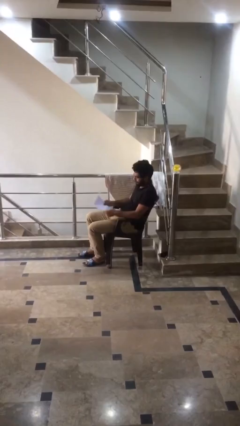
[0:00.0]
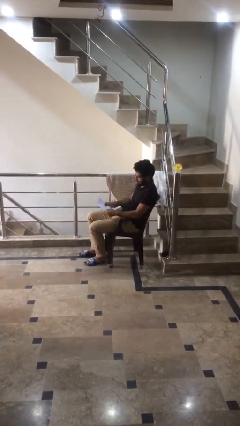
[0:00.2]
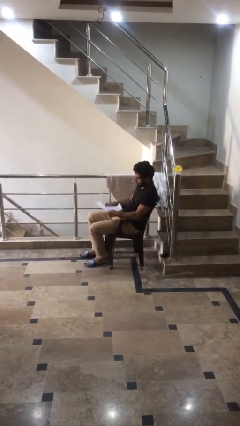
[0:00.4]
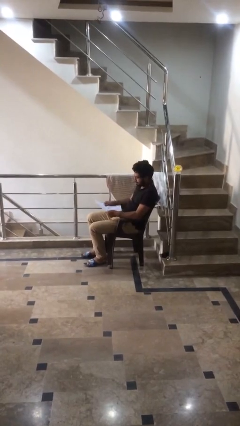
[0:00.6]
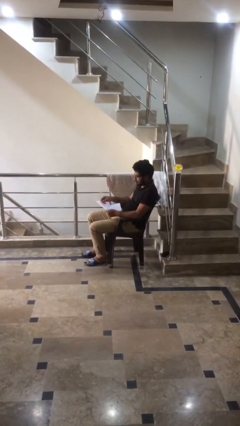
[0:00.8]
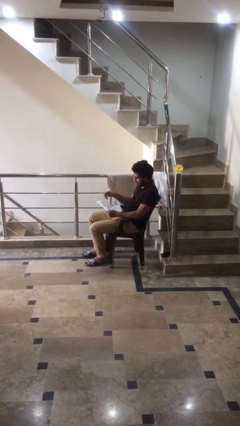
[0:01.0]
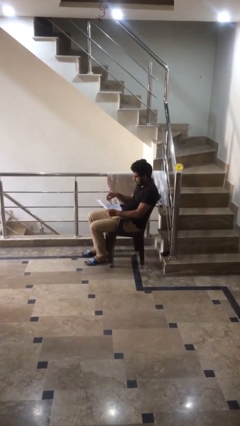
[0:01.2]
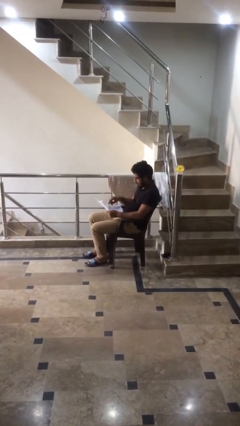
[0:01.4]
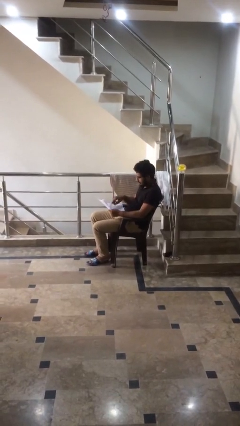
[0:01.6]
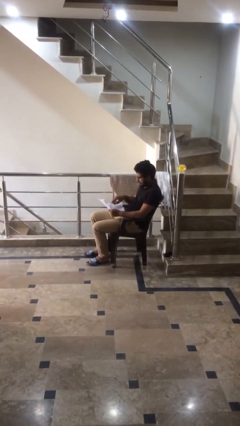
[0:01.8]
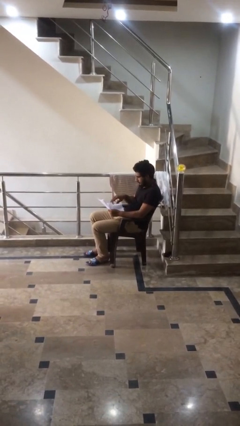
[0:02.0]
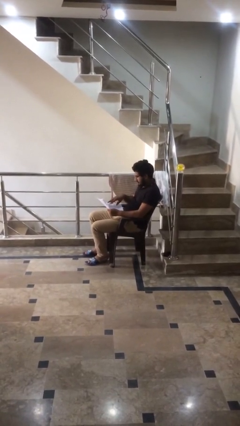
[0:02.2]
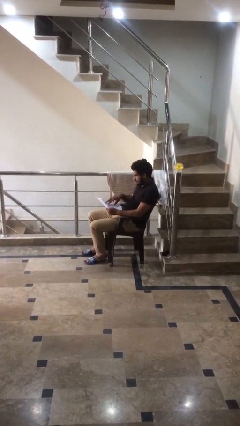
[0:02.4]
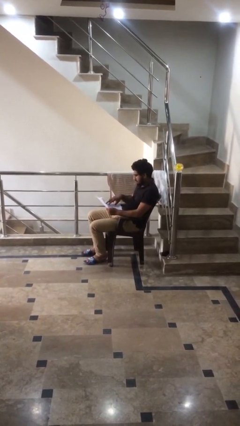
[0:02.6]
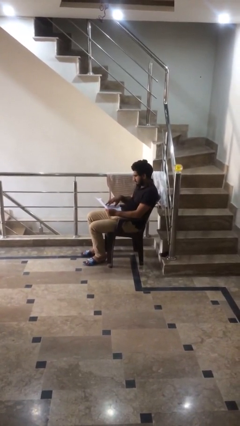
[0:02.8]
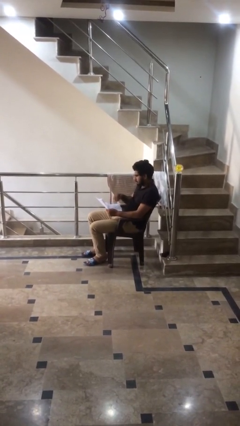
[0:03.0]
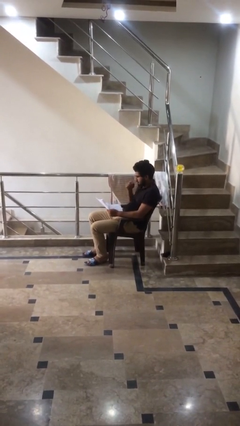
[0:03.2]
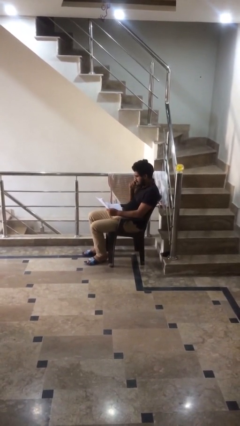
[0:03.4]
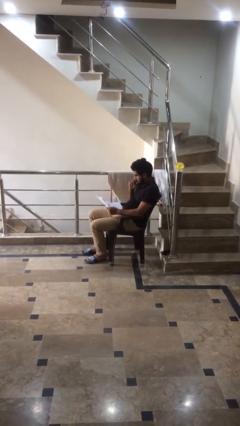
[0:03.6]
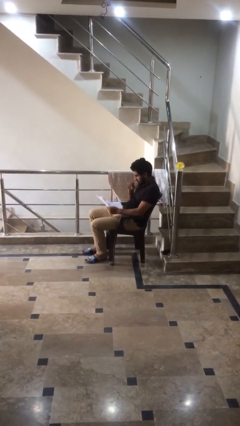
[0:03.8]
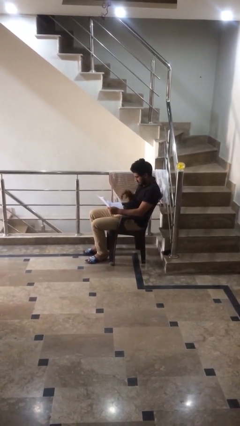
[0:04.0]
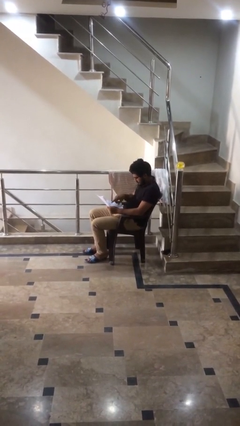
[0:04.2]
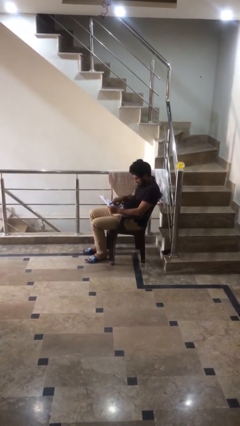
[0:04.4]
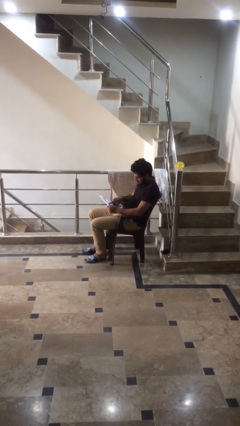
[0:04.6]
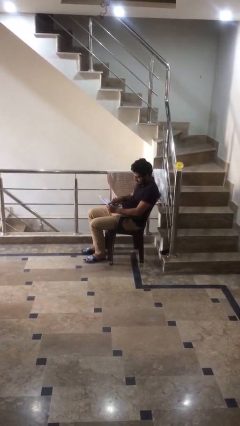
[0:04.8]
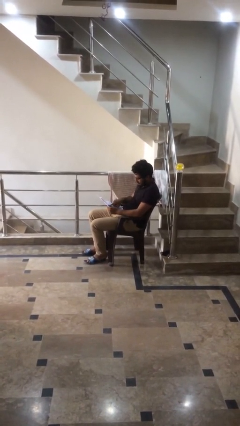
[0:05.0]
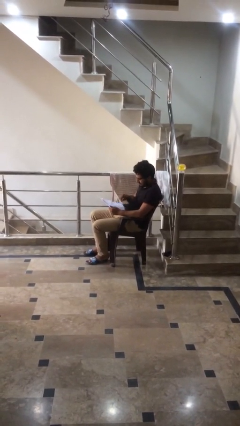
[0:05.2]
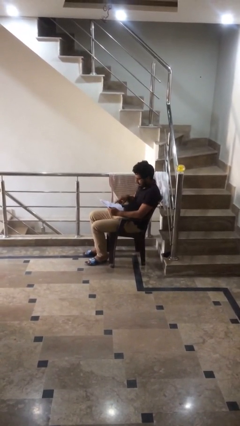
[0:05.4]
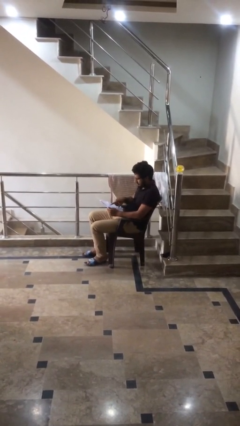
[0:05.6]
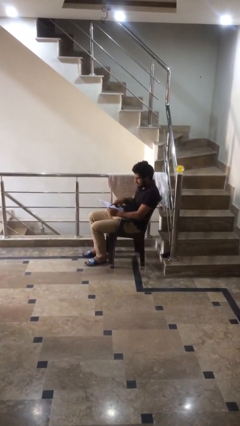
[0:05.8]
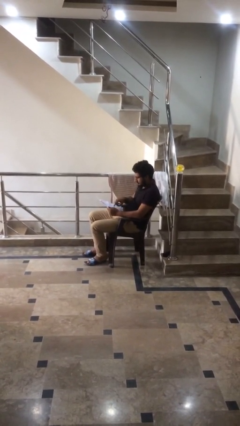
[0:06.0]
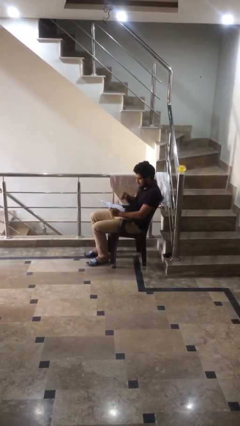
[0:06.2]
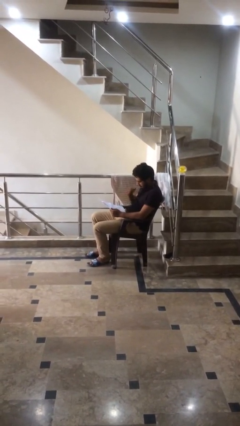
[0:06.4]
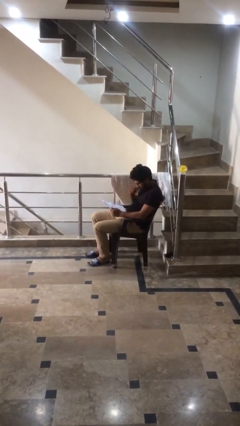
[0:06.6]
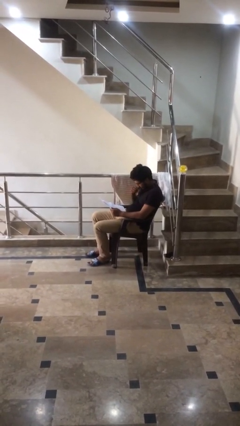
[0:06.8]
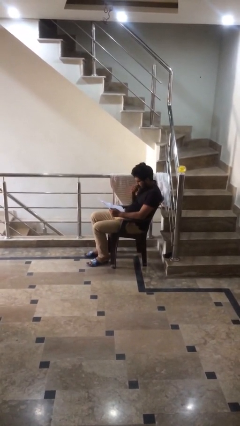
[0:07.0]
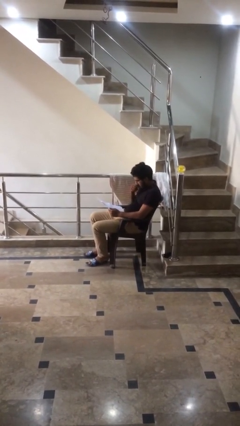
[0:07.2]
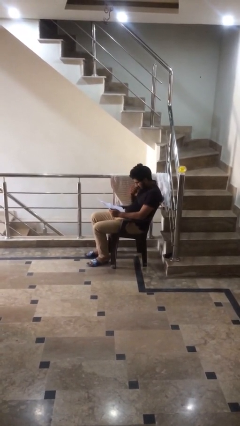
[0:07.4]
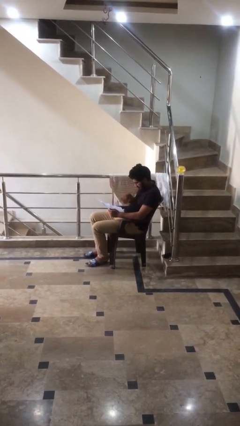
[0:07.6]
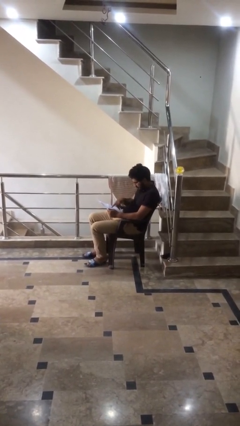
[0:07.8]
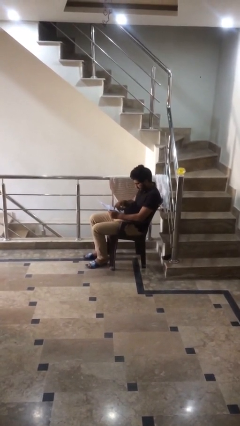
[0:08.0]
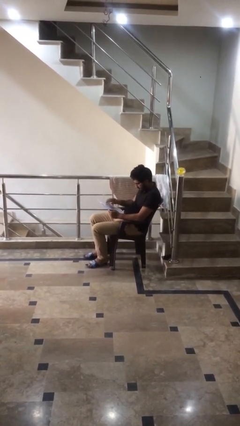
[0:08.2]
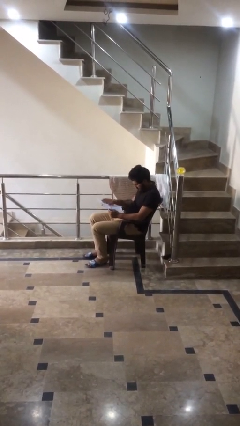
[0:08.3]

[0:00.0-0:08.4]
person reads document

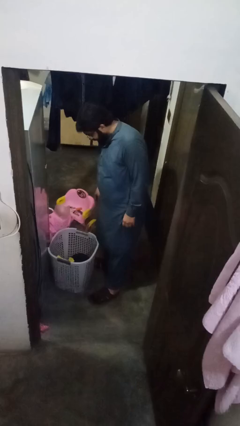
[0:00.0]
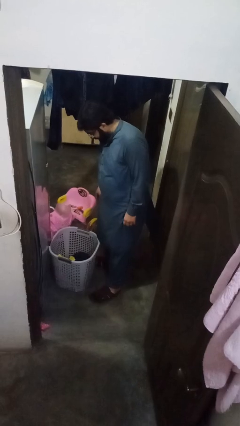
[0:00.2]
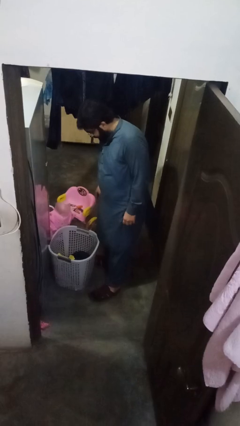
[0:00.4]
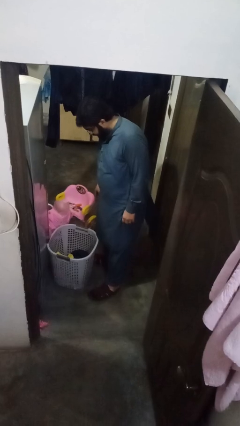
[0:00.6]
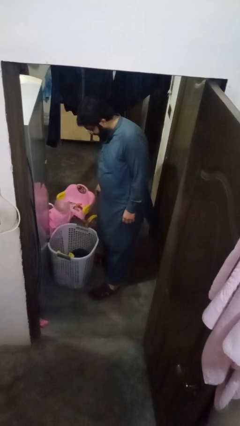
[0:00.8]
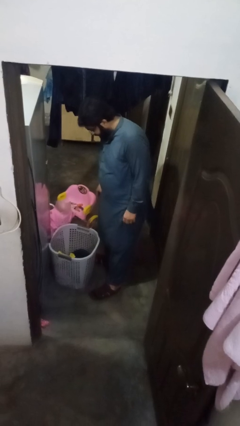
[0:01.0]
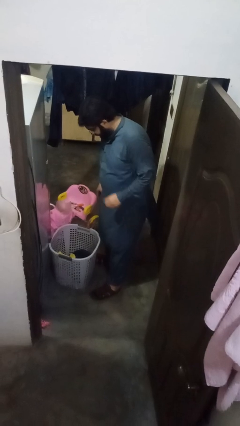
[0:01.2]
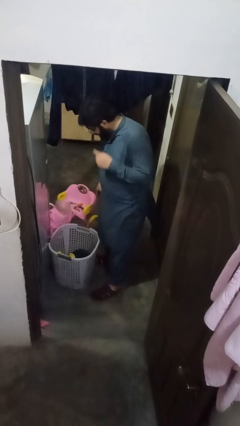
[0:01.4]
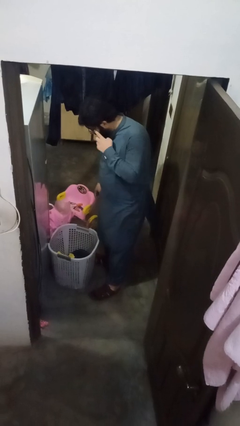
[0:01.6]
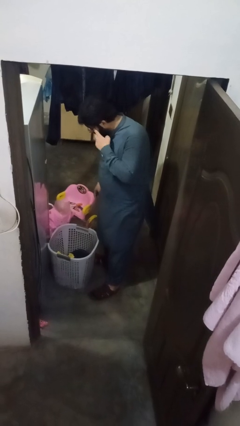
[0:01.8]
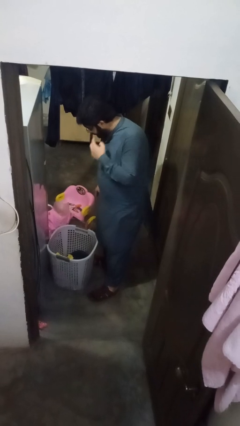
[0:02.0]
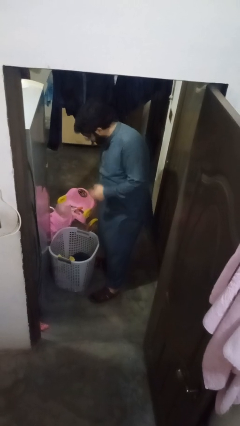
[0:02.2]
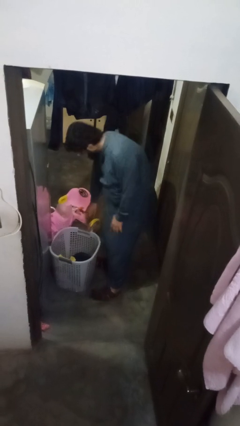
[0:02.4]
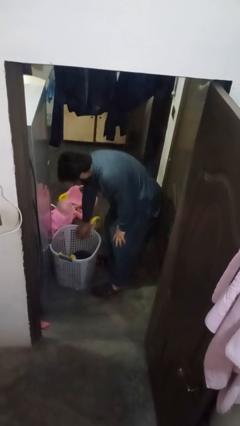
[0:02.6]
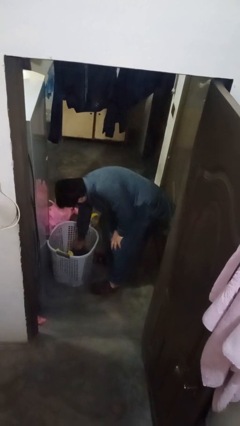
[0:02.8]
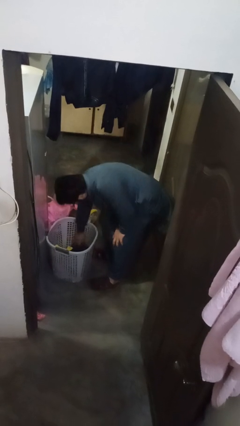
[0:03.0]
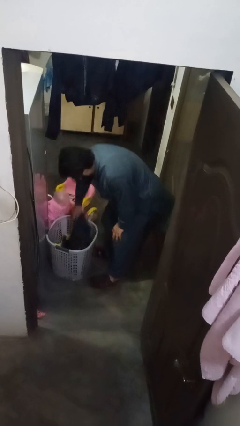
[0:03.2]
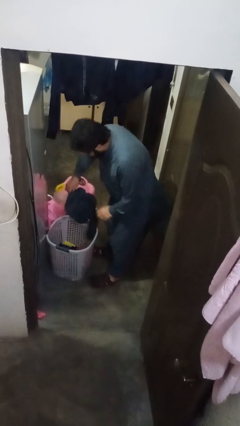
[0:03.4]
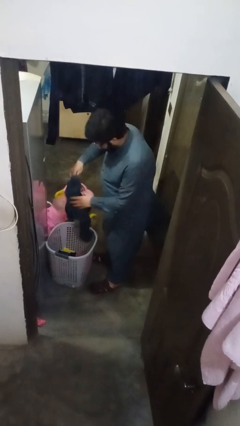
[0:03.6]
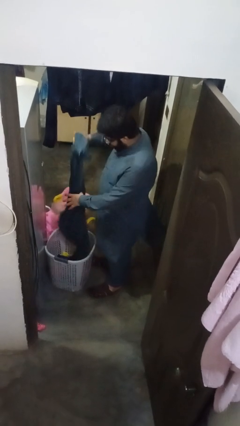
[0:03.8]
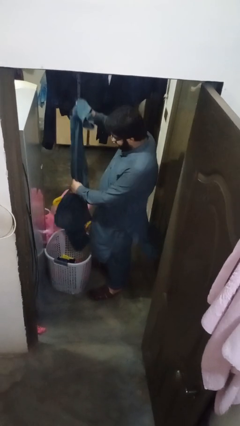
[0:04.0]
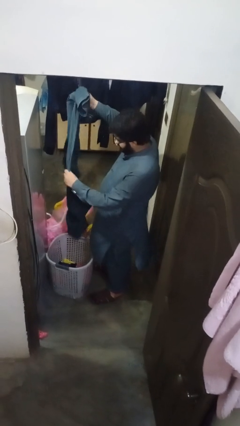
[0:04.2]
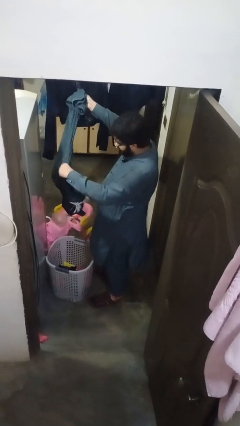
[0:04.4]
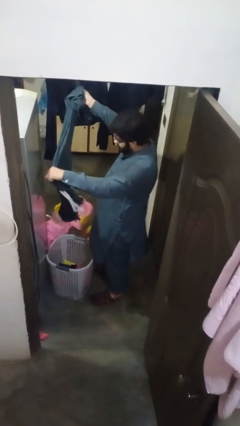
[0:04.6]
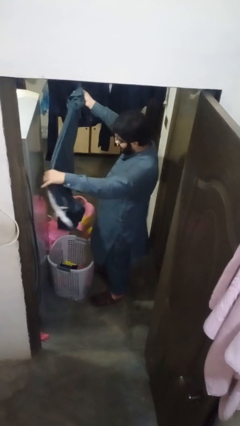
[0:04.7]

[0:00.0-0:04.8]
person folds pants

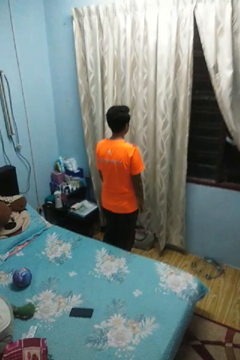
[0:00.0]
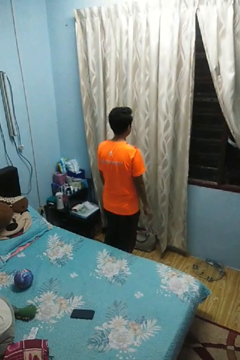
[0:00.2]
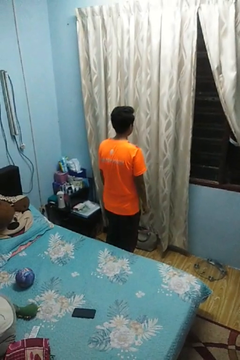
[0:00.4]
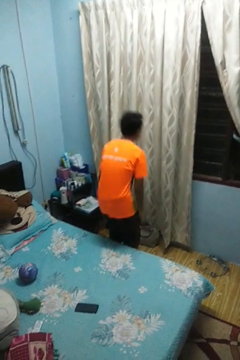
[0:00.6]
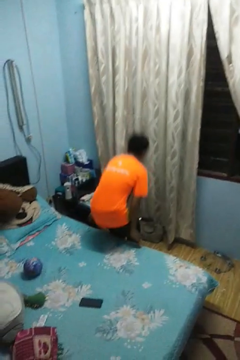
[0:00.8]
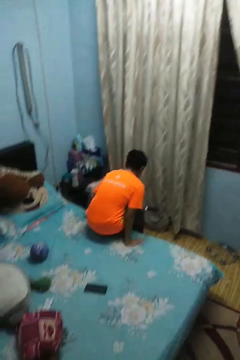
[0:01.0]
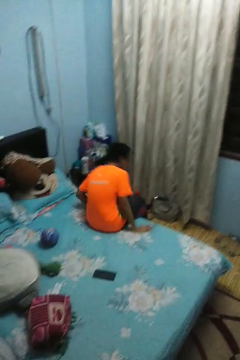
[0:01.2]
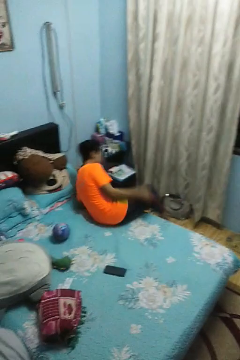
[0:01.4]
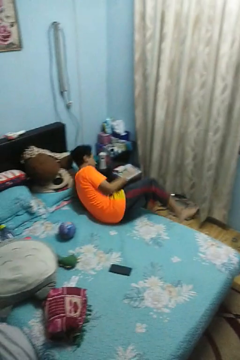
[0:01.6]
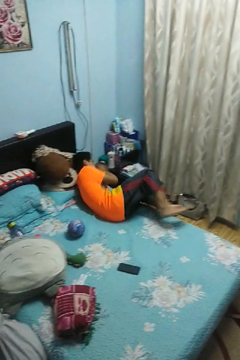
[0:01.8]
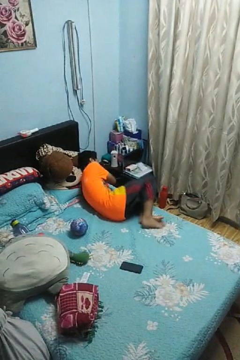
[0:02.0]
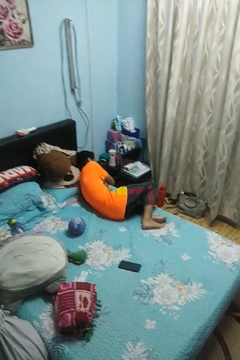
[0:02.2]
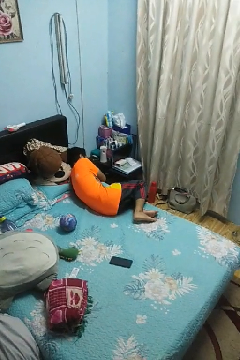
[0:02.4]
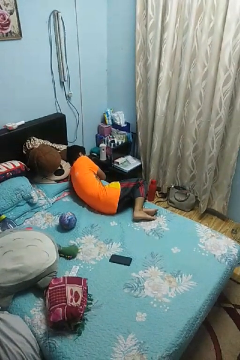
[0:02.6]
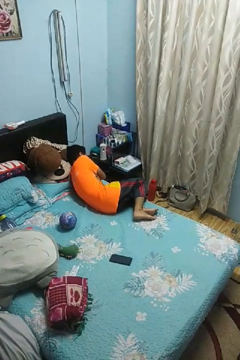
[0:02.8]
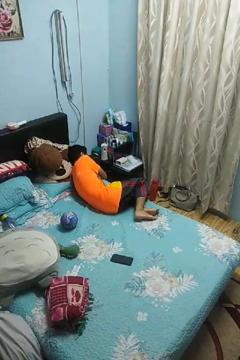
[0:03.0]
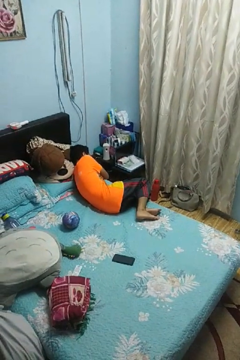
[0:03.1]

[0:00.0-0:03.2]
person lies down on bed

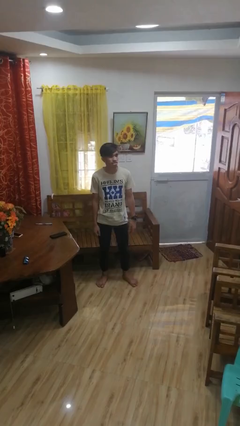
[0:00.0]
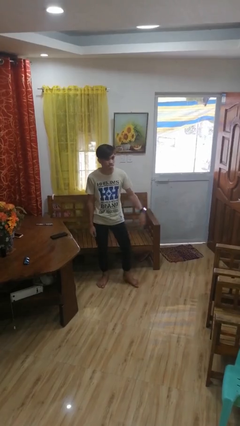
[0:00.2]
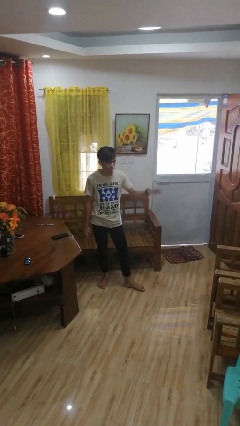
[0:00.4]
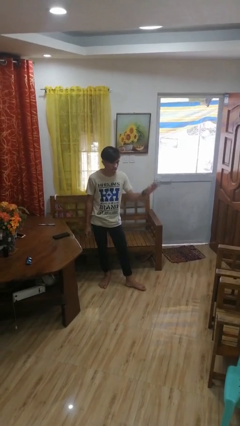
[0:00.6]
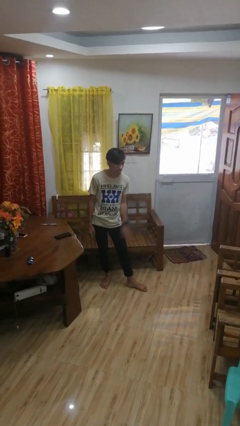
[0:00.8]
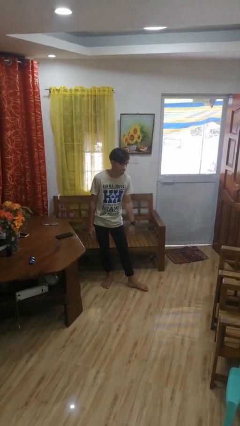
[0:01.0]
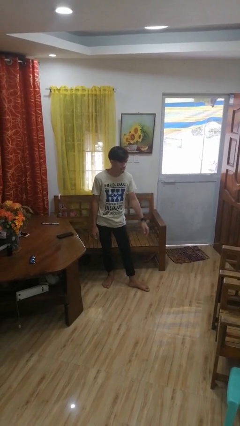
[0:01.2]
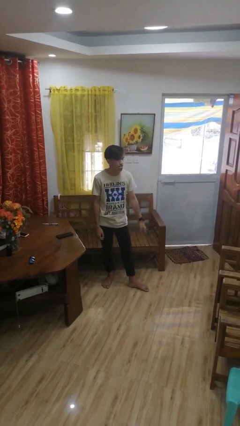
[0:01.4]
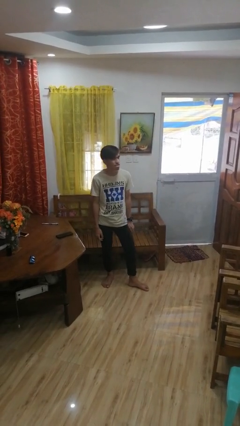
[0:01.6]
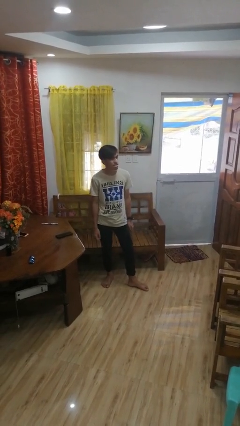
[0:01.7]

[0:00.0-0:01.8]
person slaps hands on thighs

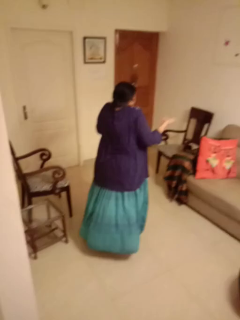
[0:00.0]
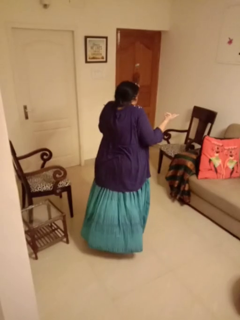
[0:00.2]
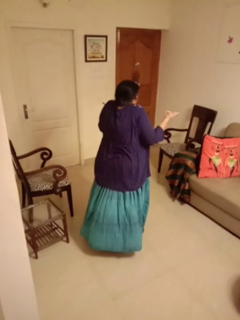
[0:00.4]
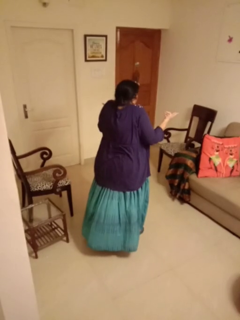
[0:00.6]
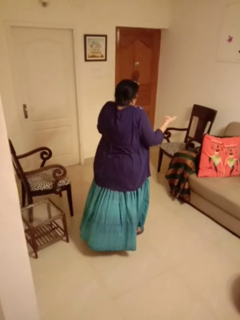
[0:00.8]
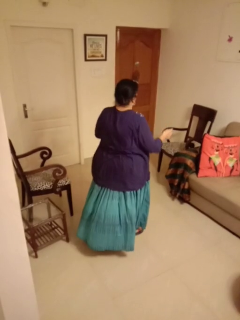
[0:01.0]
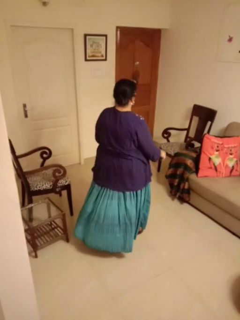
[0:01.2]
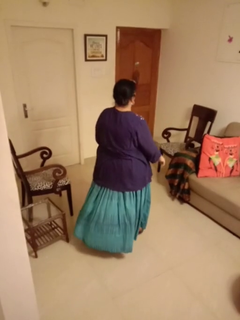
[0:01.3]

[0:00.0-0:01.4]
person shrugs
